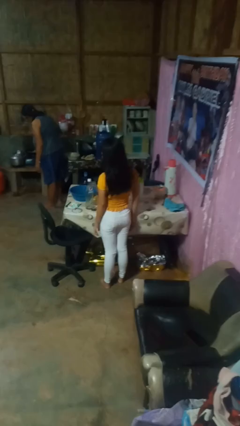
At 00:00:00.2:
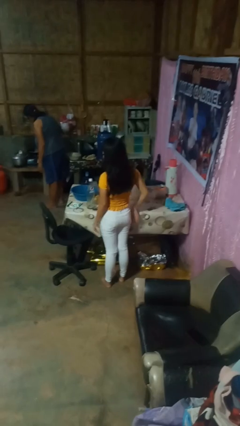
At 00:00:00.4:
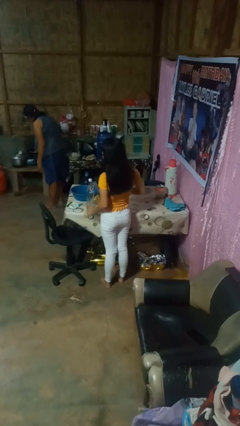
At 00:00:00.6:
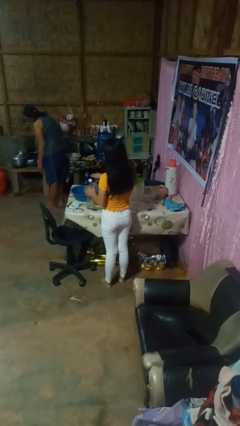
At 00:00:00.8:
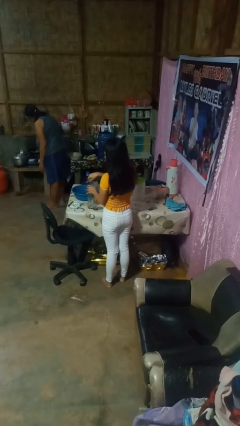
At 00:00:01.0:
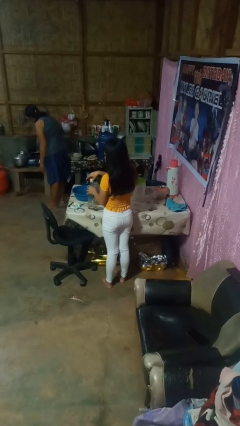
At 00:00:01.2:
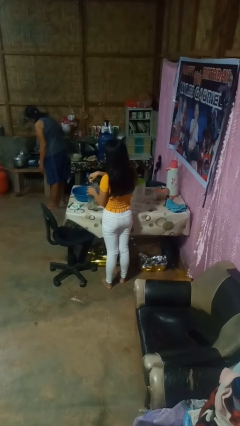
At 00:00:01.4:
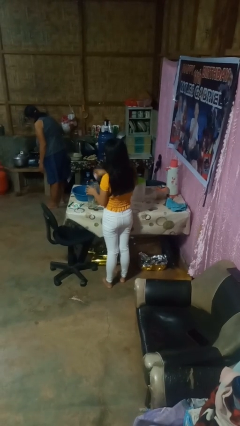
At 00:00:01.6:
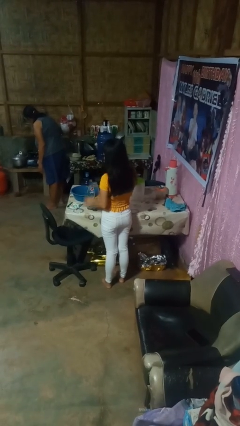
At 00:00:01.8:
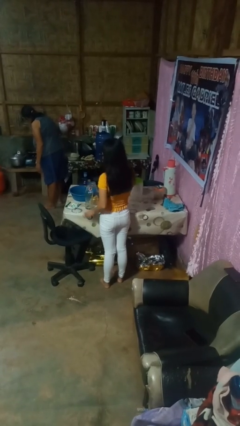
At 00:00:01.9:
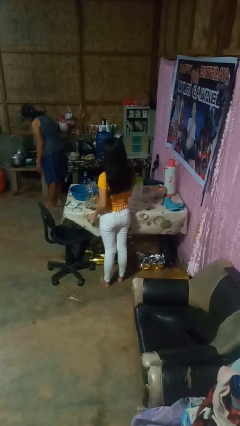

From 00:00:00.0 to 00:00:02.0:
person unscrews lid from bottle

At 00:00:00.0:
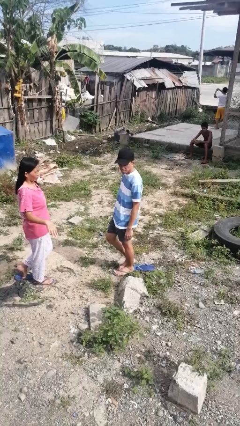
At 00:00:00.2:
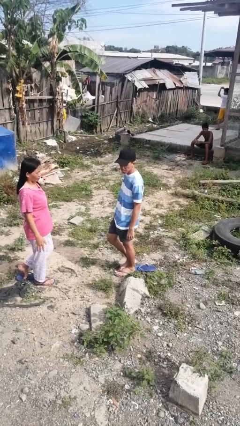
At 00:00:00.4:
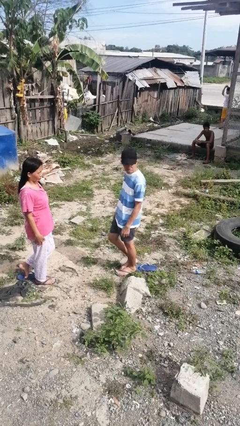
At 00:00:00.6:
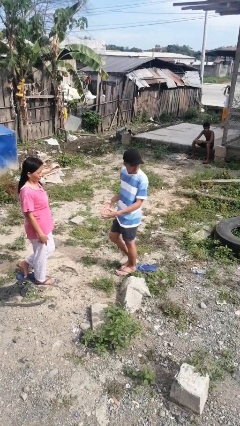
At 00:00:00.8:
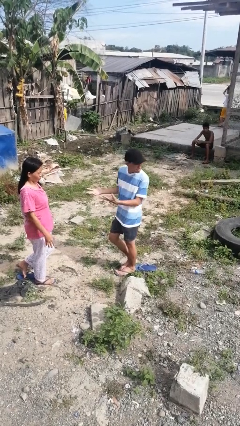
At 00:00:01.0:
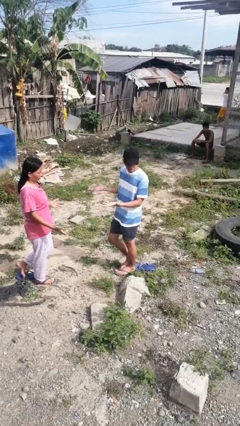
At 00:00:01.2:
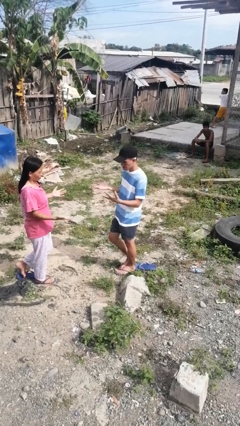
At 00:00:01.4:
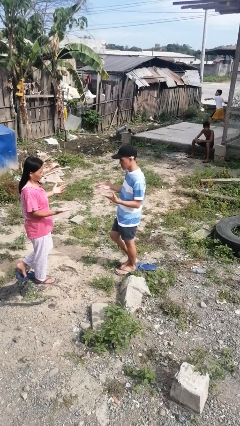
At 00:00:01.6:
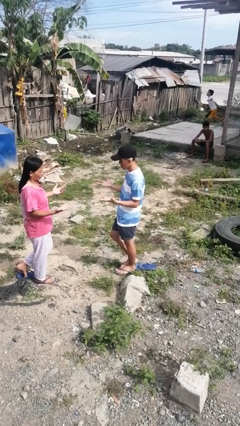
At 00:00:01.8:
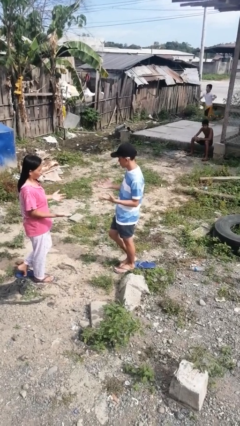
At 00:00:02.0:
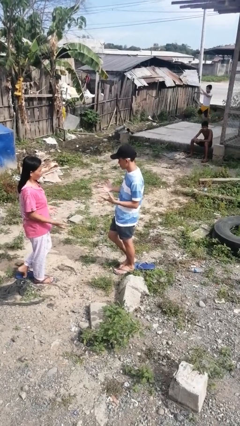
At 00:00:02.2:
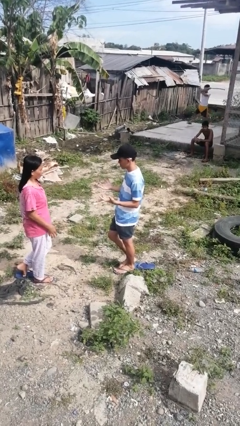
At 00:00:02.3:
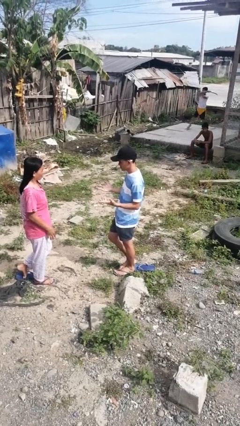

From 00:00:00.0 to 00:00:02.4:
person talks to person

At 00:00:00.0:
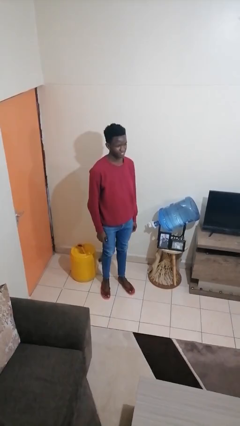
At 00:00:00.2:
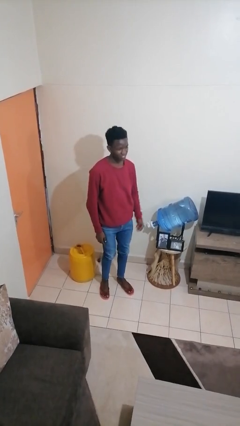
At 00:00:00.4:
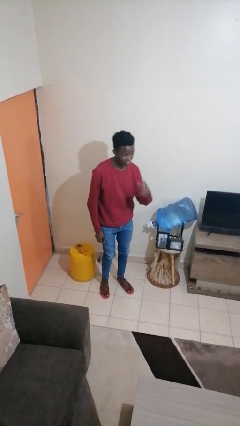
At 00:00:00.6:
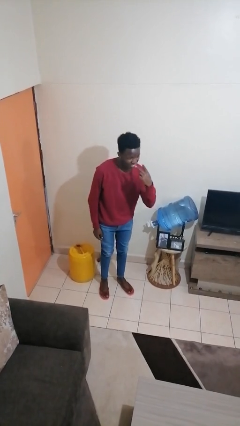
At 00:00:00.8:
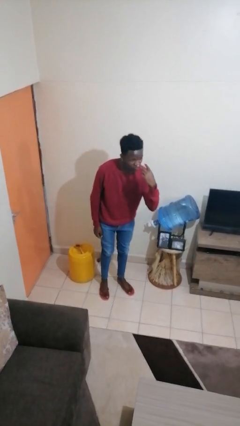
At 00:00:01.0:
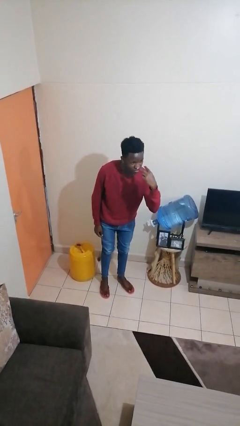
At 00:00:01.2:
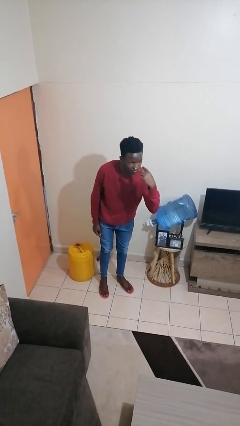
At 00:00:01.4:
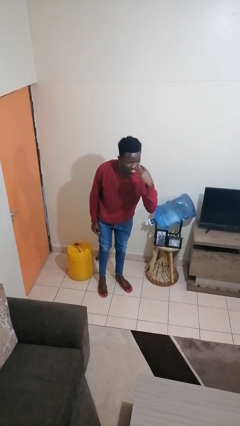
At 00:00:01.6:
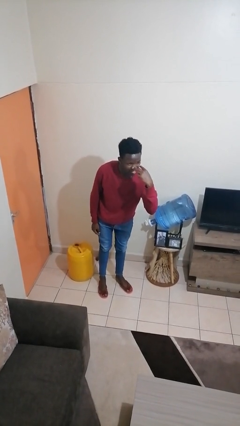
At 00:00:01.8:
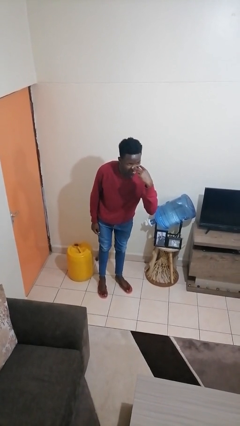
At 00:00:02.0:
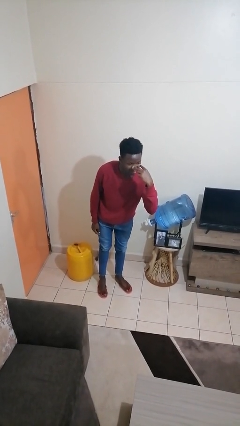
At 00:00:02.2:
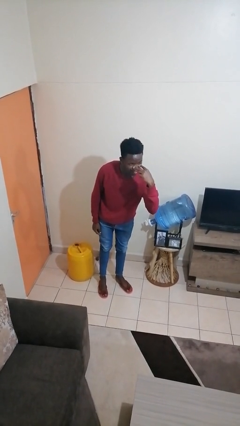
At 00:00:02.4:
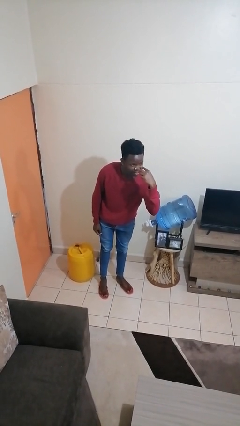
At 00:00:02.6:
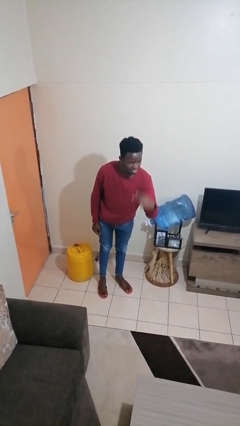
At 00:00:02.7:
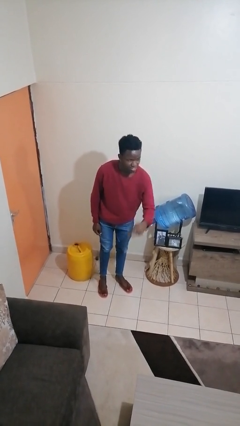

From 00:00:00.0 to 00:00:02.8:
person gestures watch closely

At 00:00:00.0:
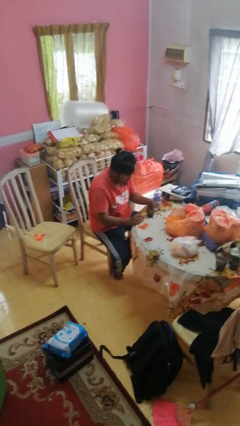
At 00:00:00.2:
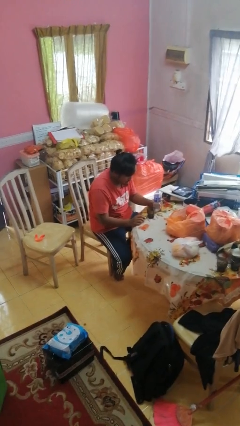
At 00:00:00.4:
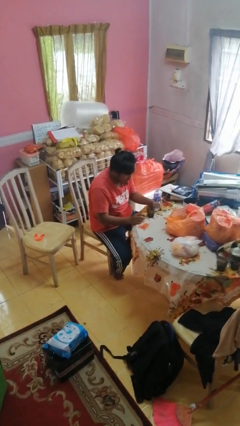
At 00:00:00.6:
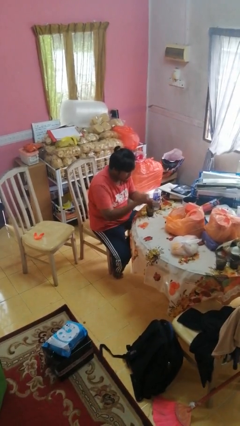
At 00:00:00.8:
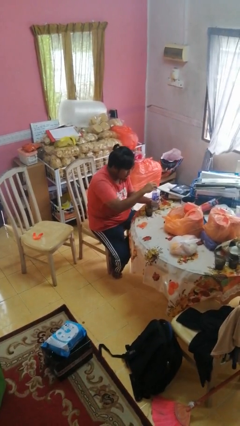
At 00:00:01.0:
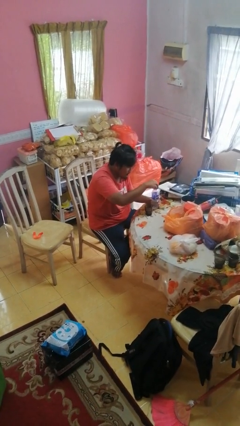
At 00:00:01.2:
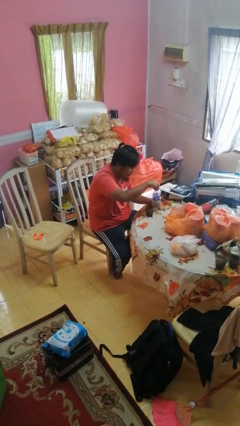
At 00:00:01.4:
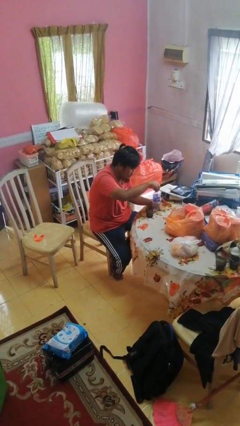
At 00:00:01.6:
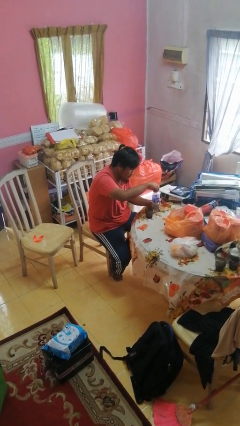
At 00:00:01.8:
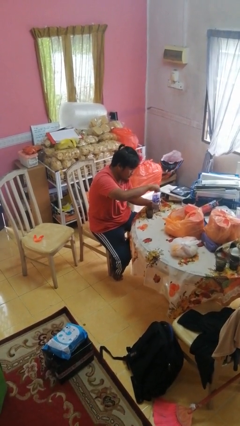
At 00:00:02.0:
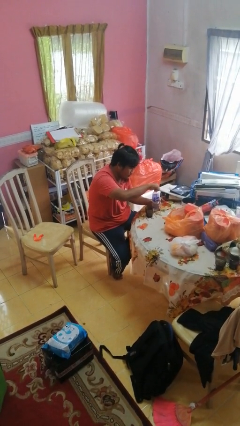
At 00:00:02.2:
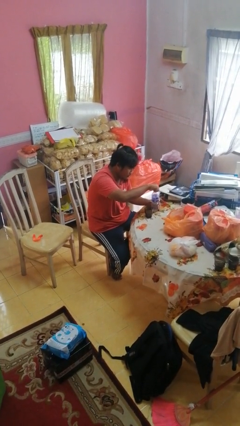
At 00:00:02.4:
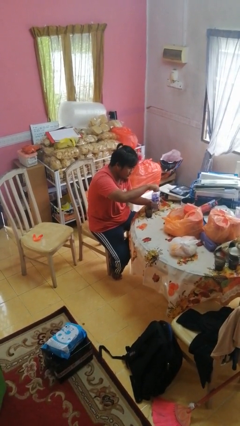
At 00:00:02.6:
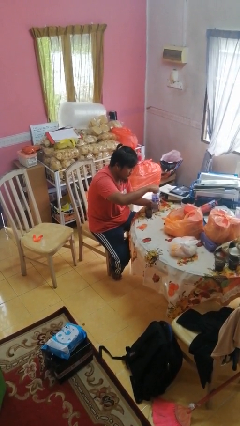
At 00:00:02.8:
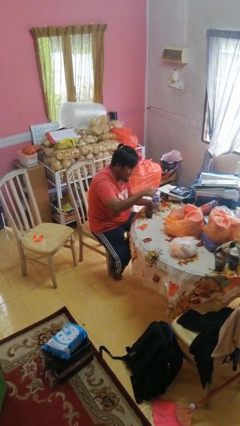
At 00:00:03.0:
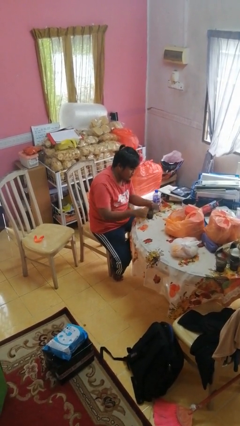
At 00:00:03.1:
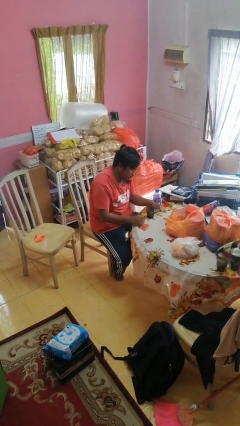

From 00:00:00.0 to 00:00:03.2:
person screws lid to bottle

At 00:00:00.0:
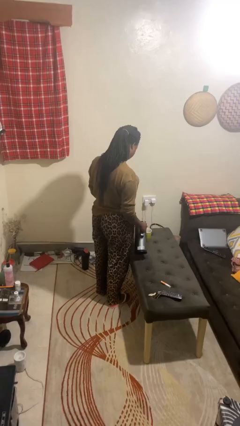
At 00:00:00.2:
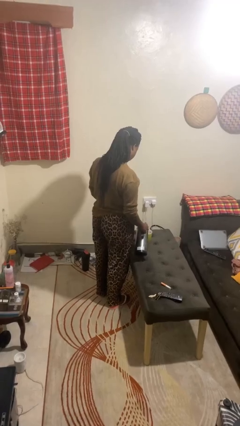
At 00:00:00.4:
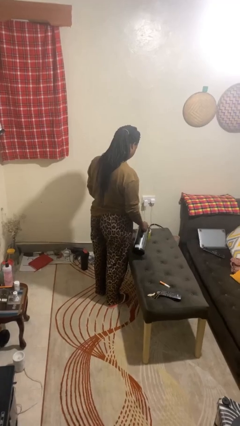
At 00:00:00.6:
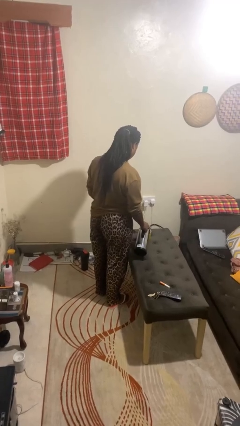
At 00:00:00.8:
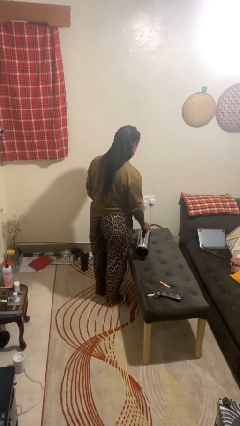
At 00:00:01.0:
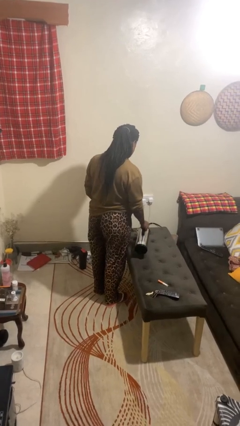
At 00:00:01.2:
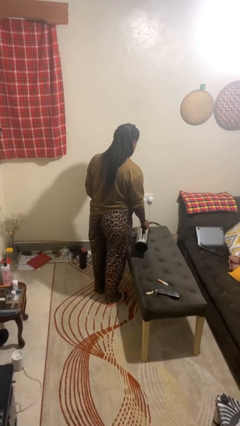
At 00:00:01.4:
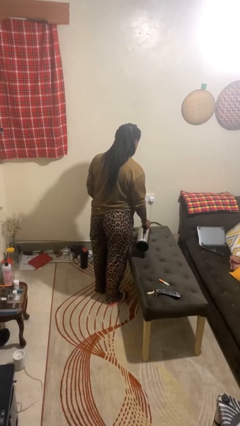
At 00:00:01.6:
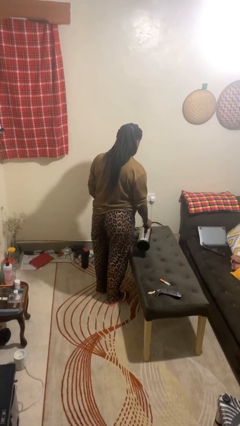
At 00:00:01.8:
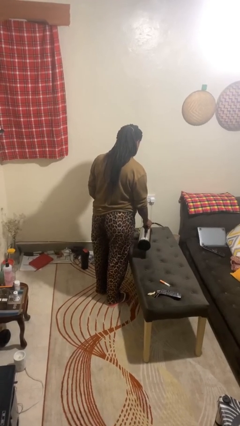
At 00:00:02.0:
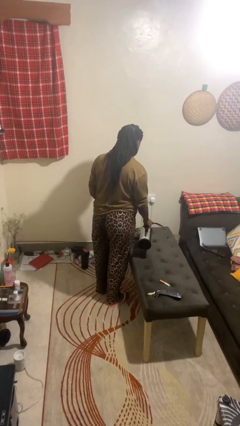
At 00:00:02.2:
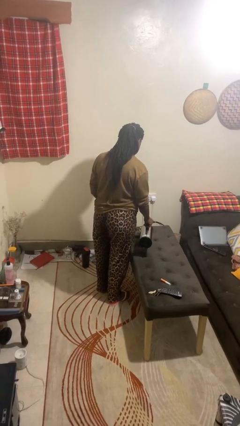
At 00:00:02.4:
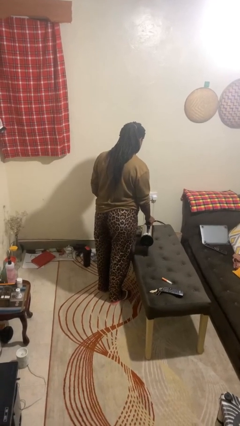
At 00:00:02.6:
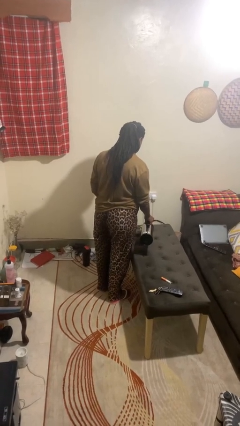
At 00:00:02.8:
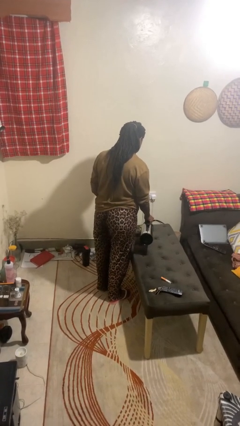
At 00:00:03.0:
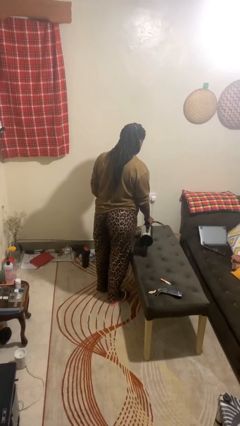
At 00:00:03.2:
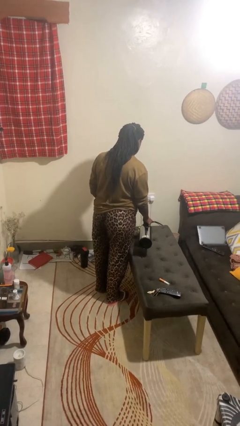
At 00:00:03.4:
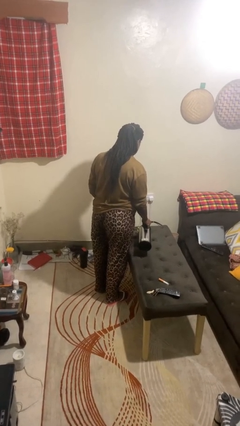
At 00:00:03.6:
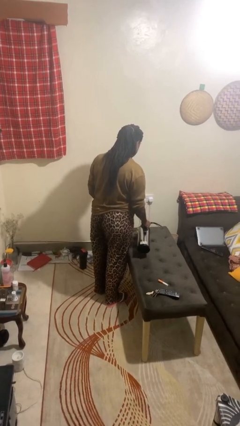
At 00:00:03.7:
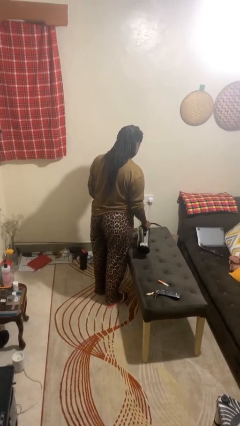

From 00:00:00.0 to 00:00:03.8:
person pours coffee into mug

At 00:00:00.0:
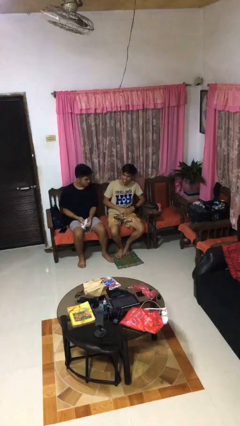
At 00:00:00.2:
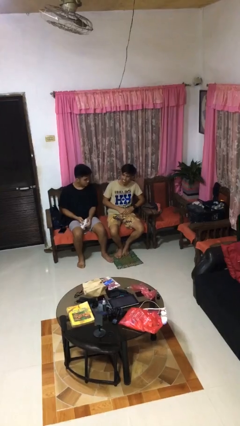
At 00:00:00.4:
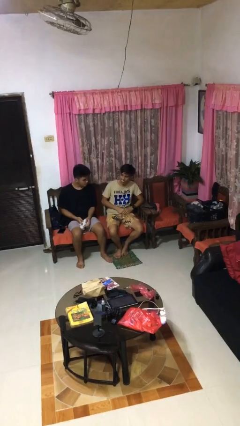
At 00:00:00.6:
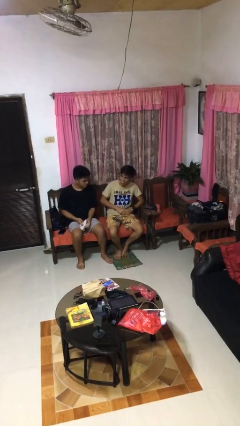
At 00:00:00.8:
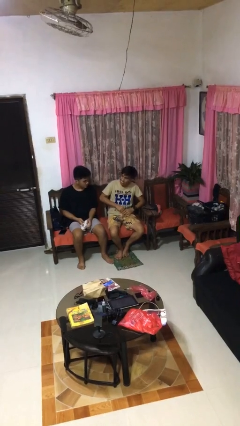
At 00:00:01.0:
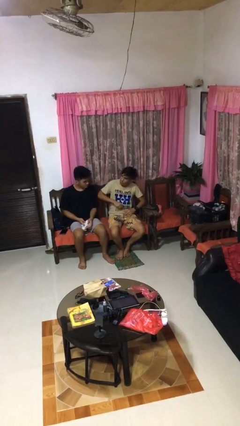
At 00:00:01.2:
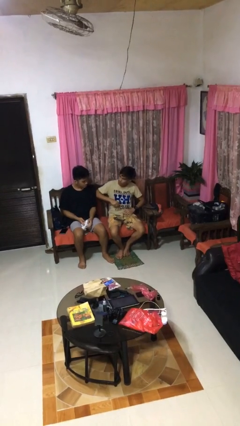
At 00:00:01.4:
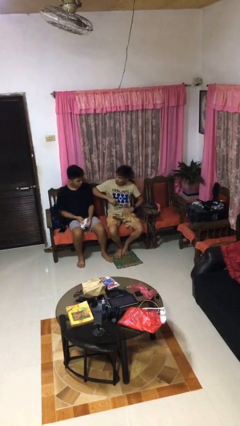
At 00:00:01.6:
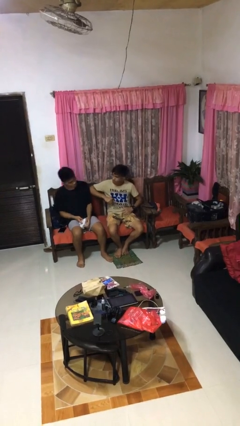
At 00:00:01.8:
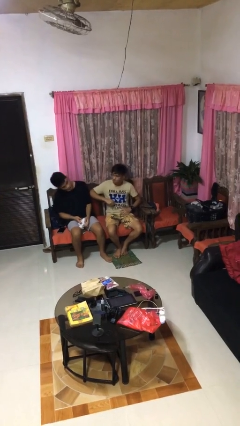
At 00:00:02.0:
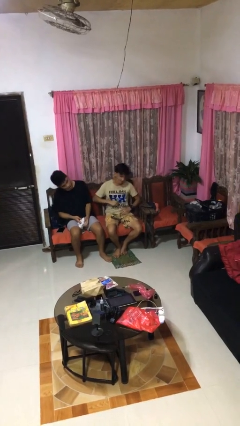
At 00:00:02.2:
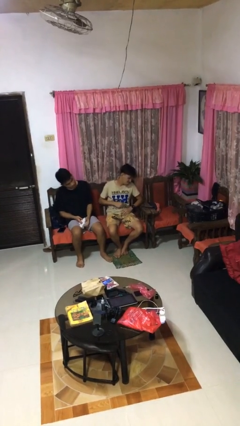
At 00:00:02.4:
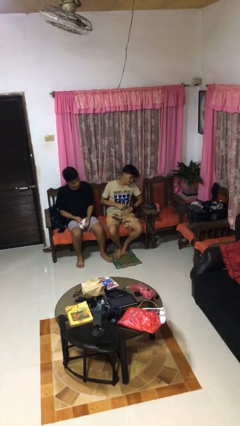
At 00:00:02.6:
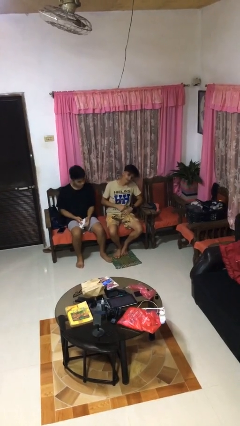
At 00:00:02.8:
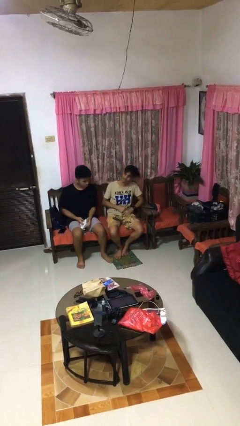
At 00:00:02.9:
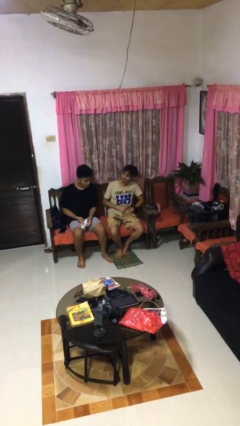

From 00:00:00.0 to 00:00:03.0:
person nudges person with elbow
